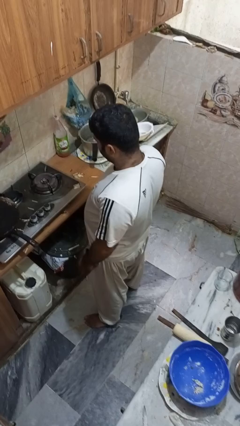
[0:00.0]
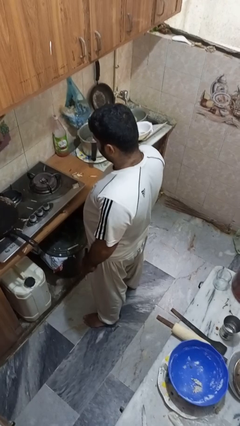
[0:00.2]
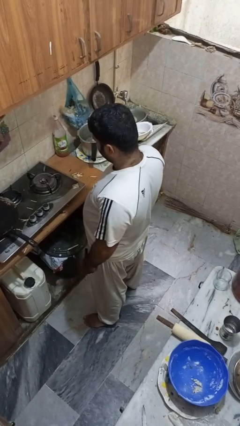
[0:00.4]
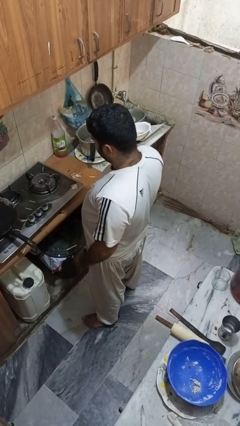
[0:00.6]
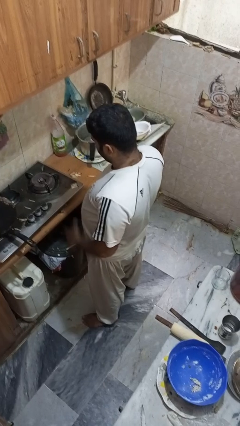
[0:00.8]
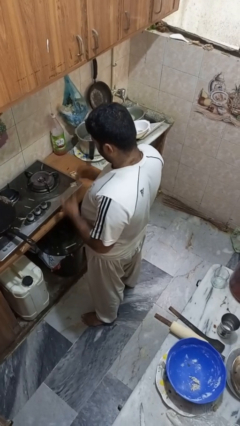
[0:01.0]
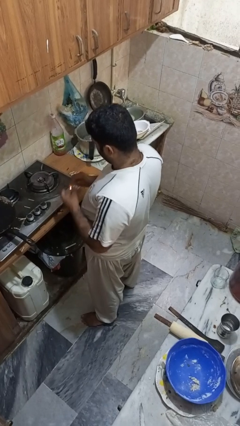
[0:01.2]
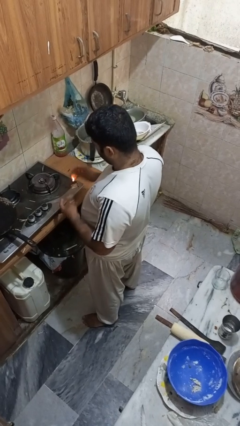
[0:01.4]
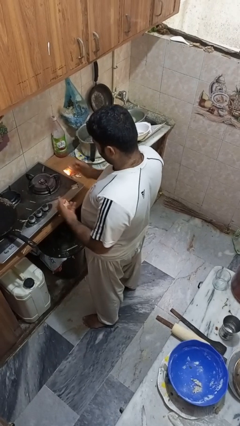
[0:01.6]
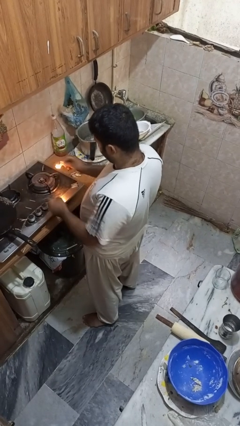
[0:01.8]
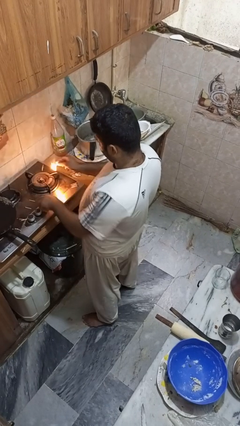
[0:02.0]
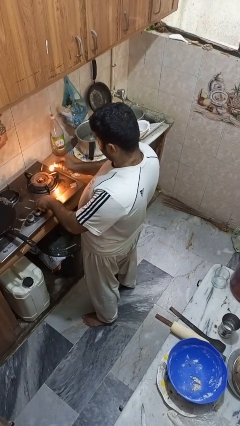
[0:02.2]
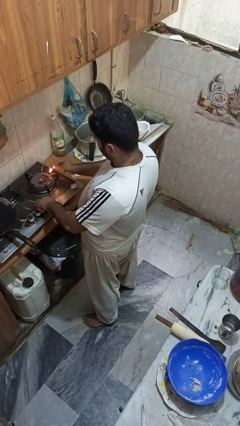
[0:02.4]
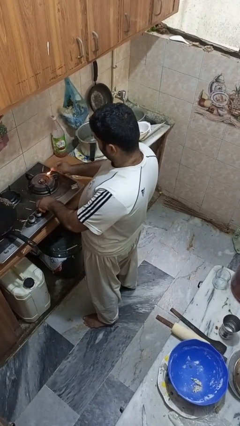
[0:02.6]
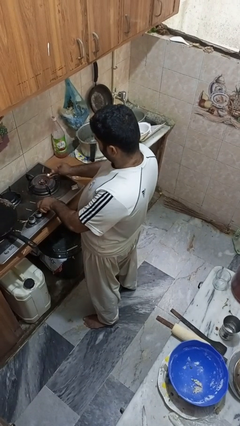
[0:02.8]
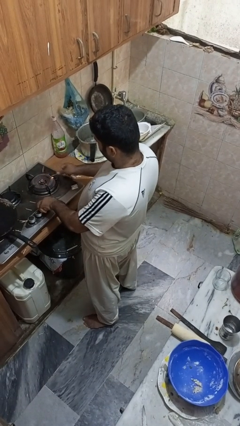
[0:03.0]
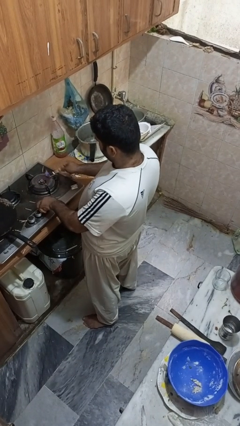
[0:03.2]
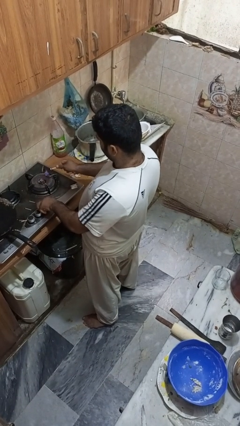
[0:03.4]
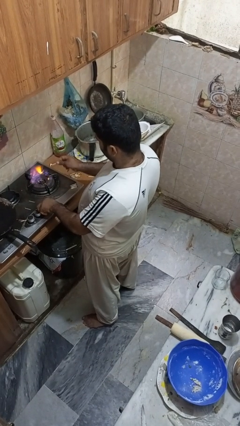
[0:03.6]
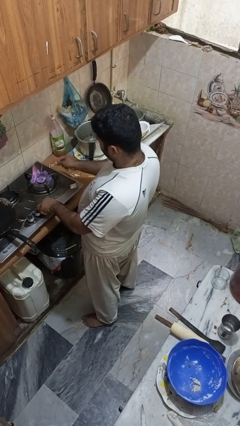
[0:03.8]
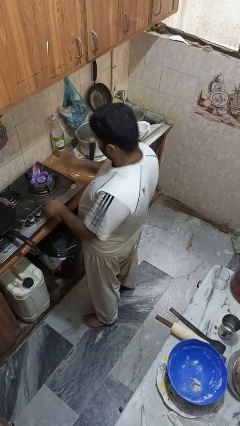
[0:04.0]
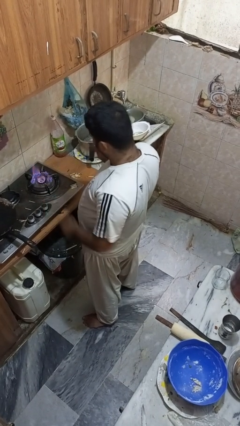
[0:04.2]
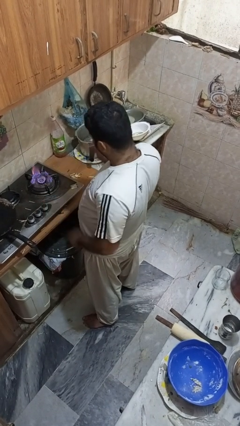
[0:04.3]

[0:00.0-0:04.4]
person turns on stovetop

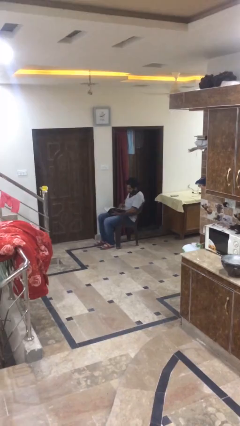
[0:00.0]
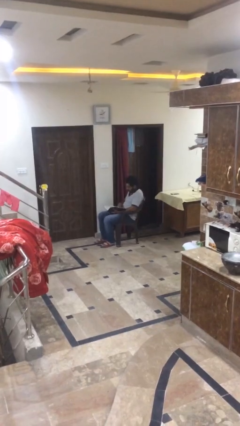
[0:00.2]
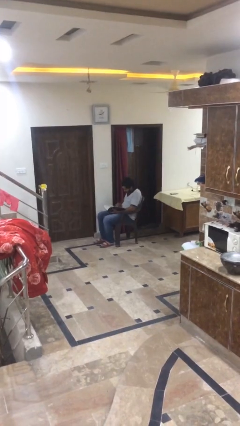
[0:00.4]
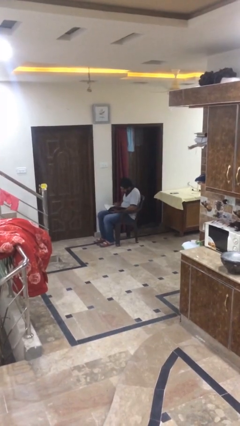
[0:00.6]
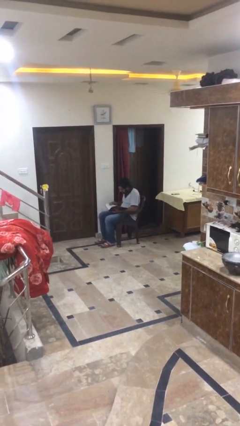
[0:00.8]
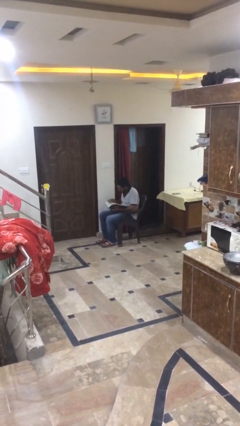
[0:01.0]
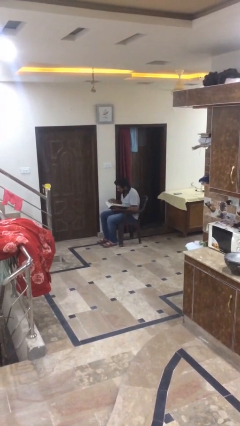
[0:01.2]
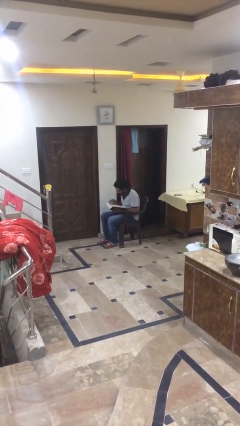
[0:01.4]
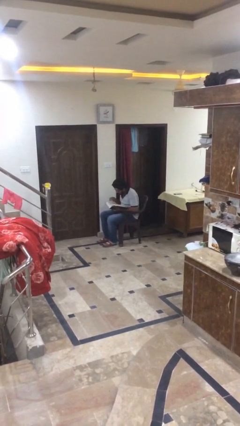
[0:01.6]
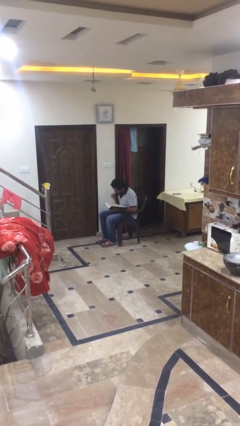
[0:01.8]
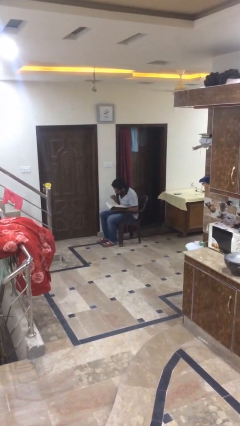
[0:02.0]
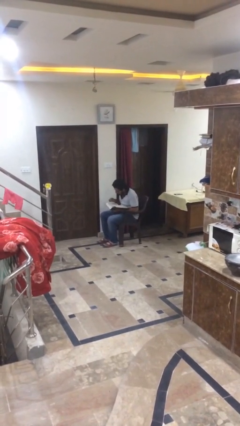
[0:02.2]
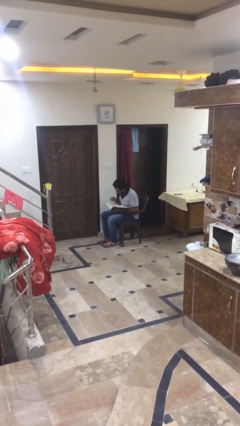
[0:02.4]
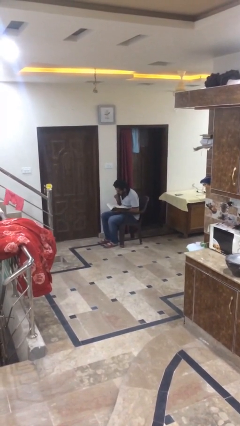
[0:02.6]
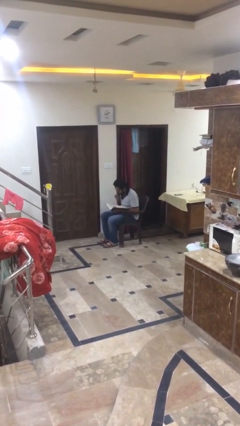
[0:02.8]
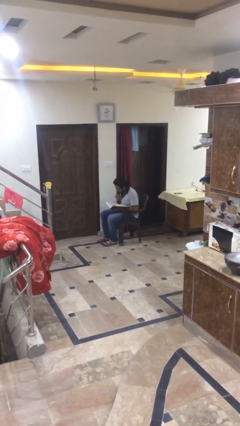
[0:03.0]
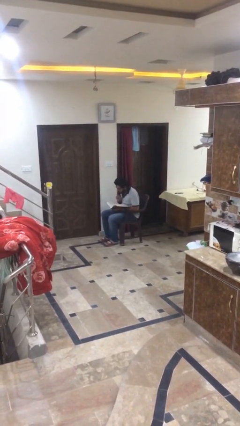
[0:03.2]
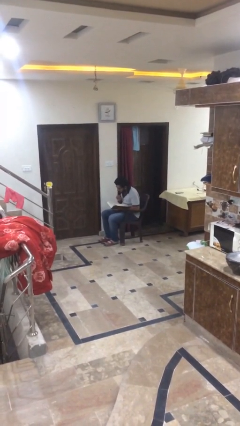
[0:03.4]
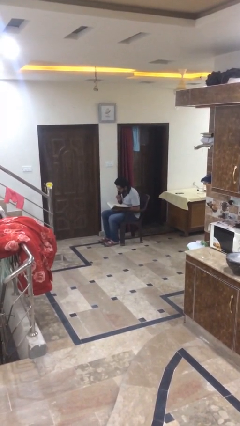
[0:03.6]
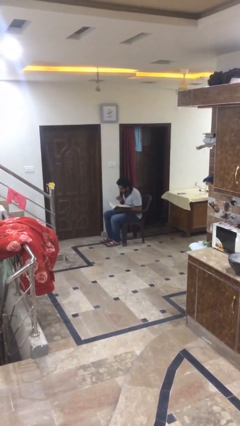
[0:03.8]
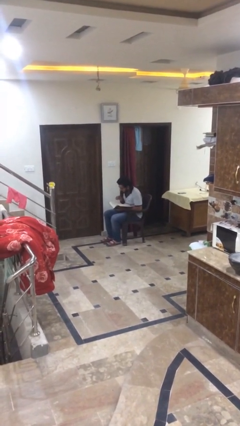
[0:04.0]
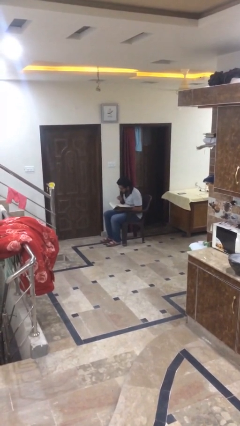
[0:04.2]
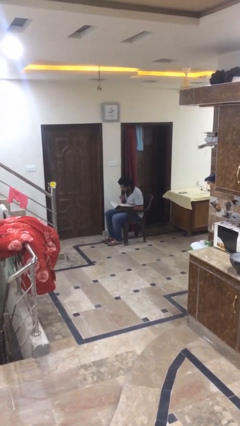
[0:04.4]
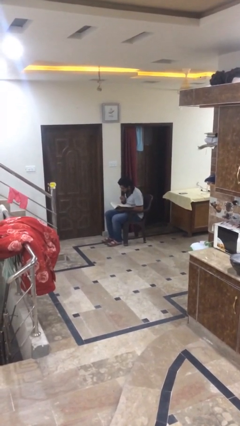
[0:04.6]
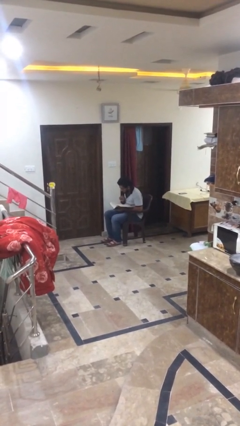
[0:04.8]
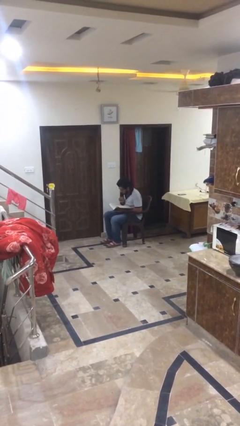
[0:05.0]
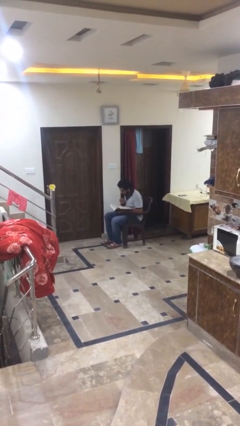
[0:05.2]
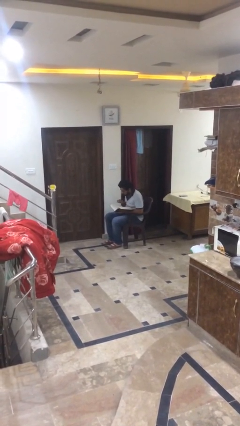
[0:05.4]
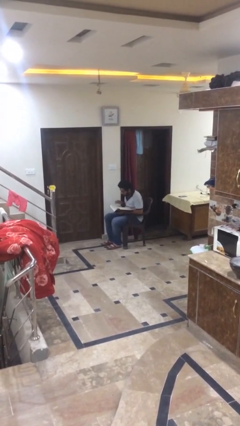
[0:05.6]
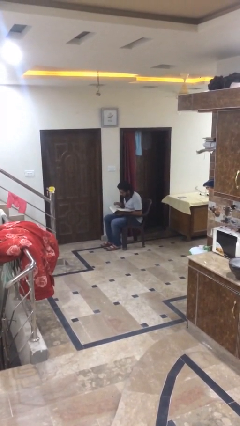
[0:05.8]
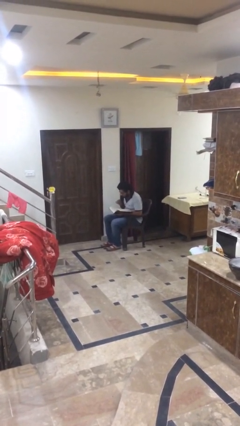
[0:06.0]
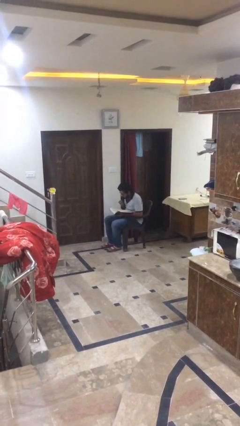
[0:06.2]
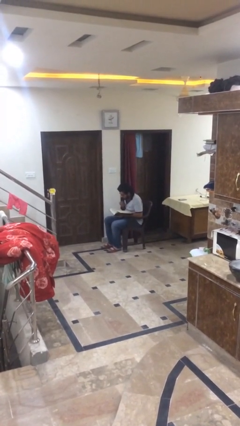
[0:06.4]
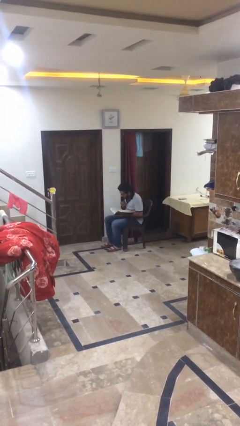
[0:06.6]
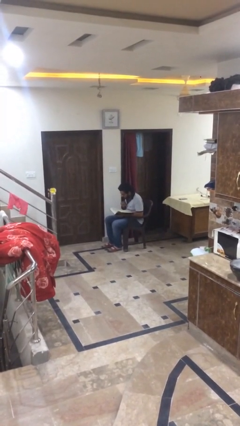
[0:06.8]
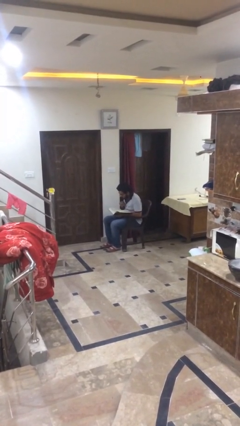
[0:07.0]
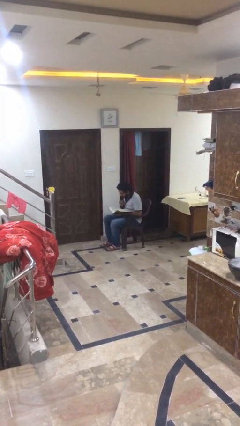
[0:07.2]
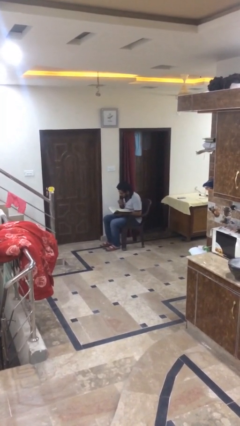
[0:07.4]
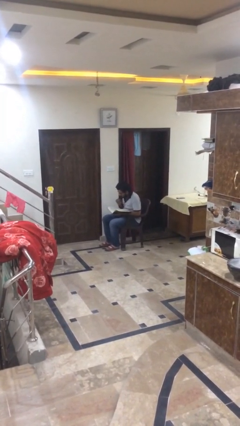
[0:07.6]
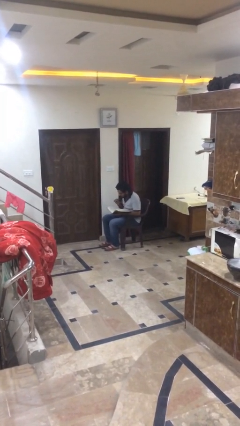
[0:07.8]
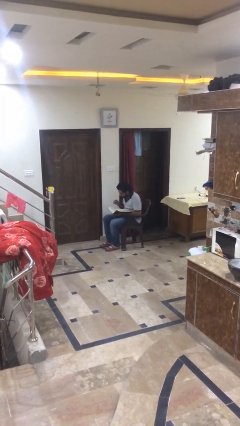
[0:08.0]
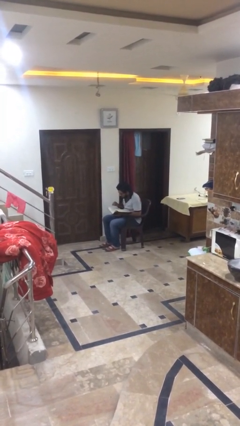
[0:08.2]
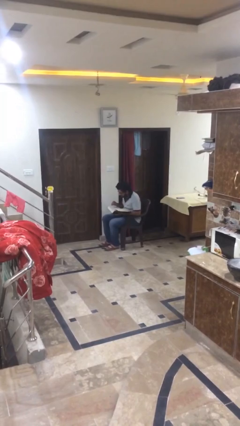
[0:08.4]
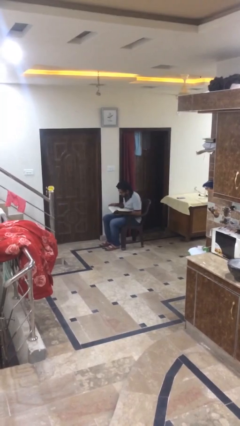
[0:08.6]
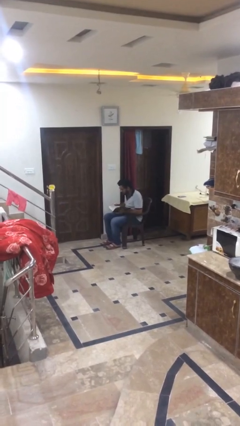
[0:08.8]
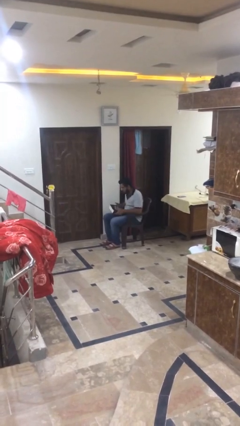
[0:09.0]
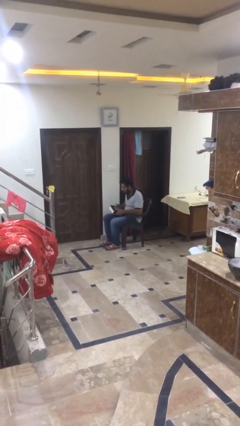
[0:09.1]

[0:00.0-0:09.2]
person reads document

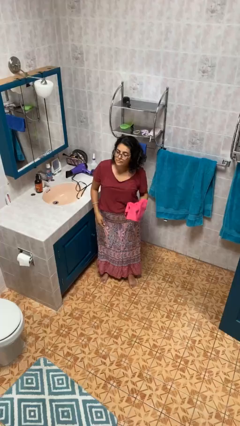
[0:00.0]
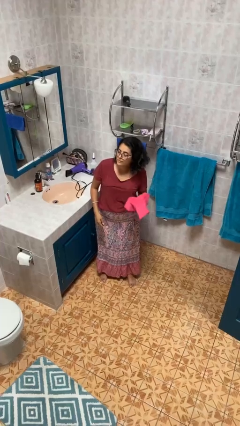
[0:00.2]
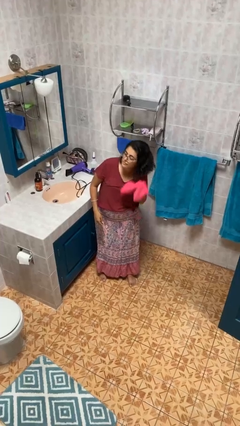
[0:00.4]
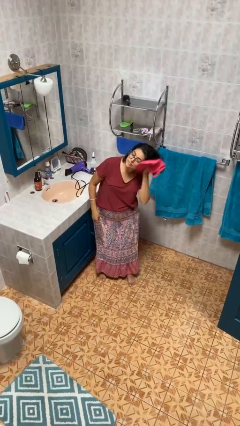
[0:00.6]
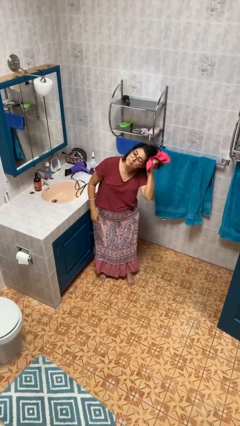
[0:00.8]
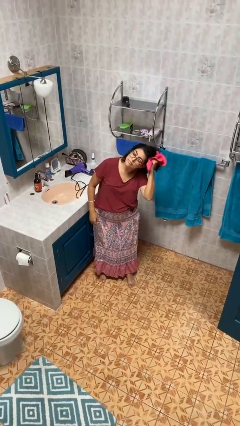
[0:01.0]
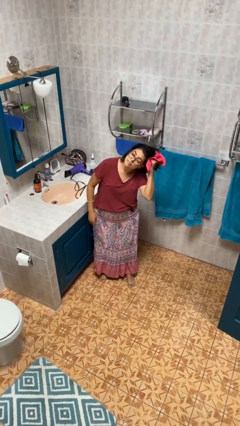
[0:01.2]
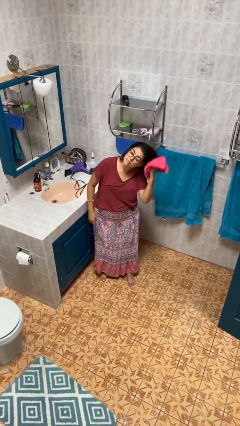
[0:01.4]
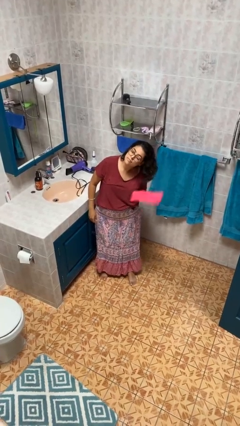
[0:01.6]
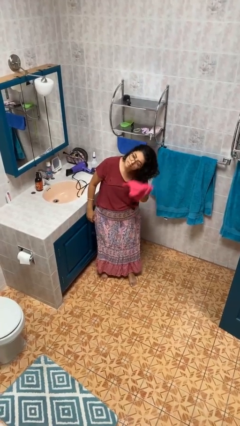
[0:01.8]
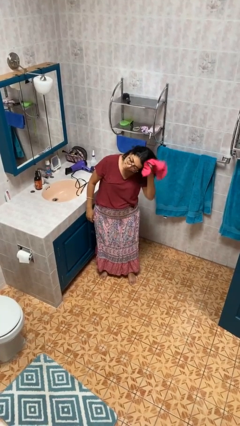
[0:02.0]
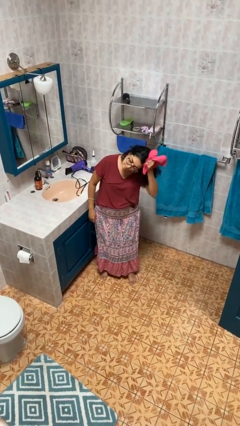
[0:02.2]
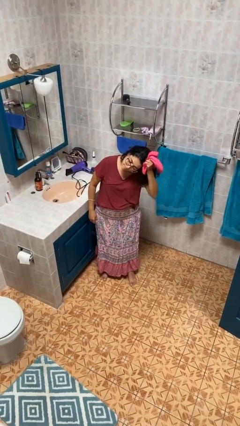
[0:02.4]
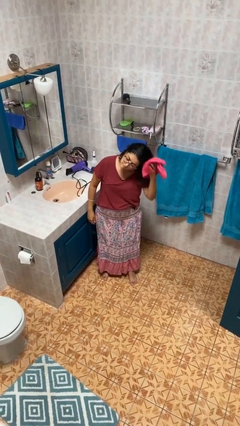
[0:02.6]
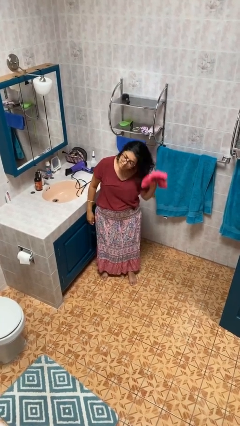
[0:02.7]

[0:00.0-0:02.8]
person dries hair with towel

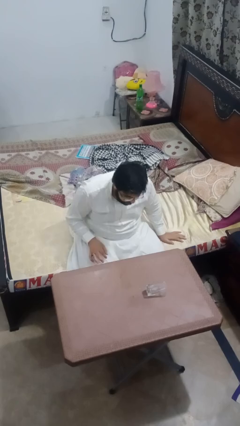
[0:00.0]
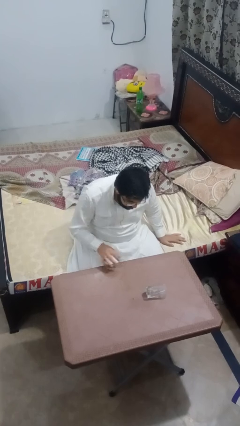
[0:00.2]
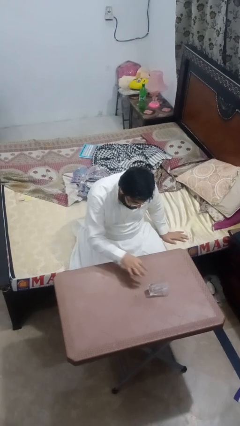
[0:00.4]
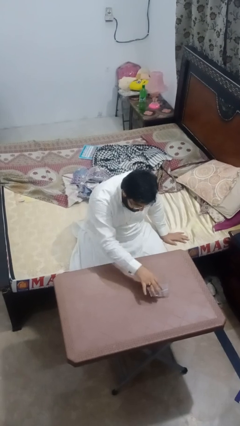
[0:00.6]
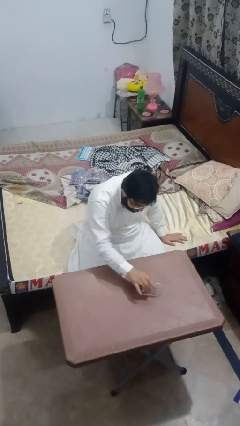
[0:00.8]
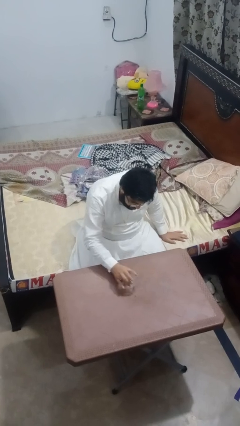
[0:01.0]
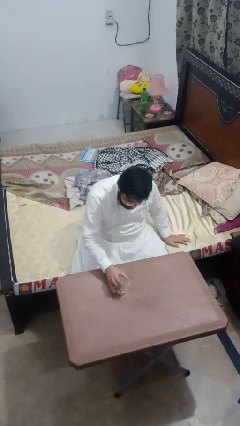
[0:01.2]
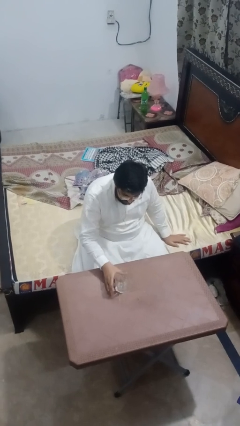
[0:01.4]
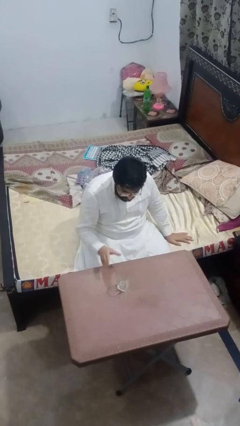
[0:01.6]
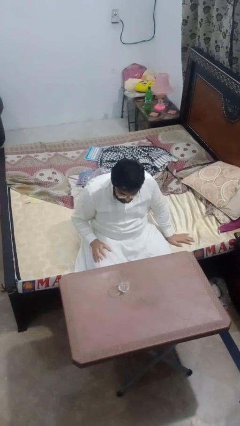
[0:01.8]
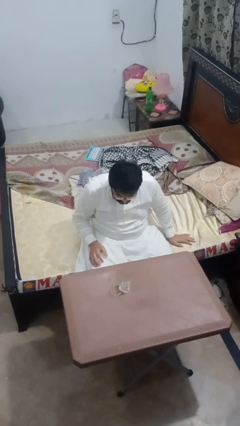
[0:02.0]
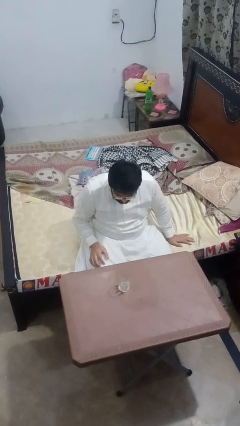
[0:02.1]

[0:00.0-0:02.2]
person sets upright glass
